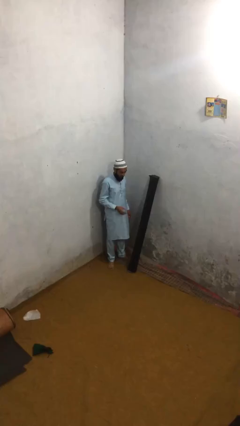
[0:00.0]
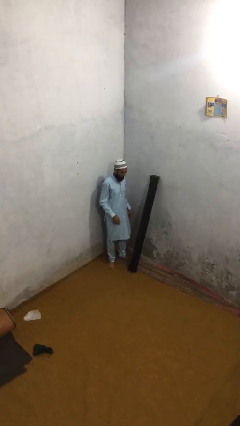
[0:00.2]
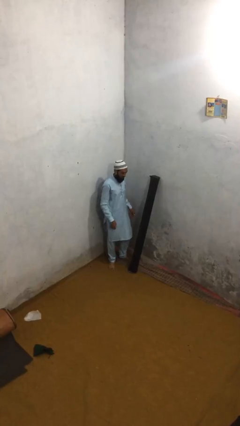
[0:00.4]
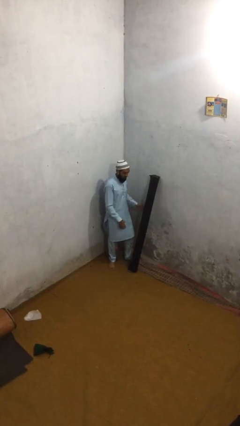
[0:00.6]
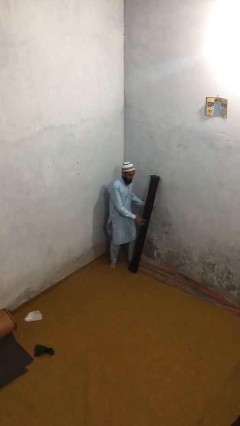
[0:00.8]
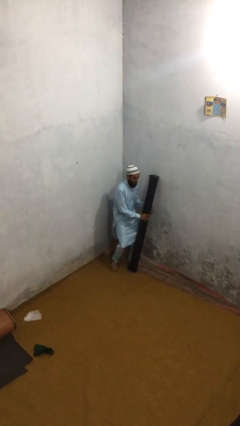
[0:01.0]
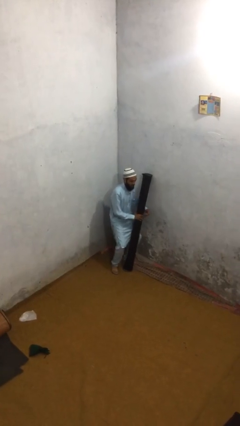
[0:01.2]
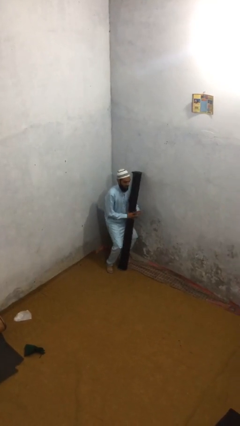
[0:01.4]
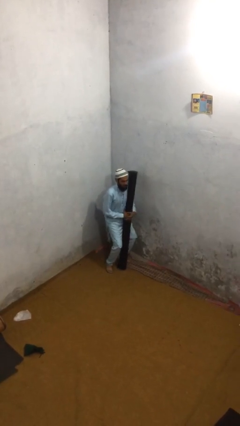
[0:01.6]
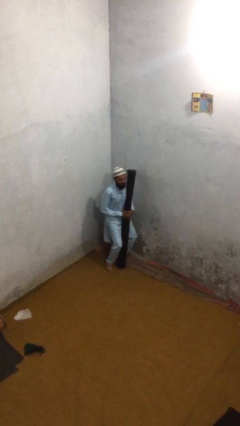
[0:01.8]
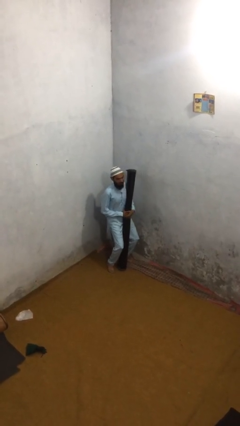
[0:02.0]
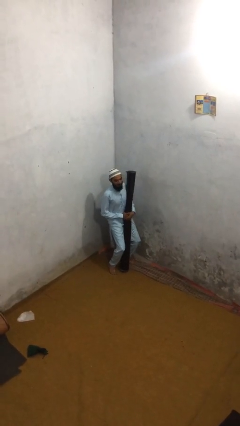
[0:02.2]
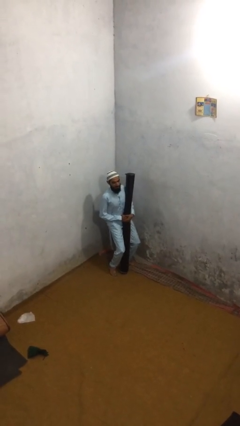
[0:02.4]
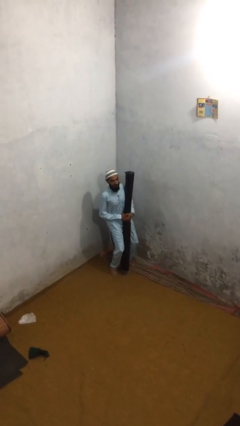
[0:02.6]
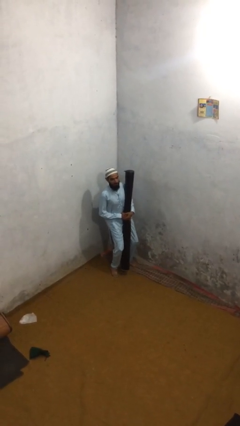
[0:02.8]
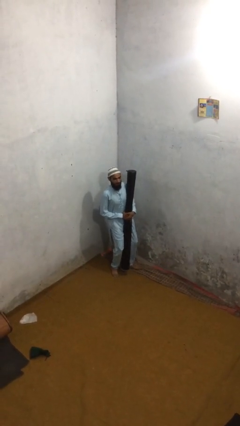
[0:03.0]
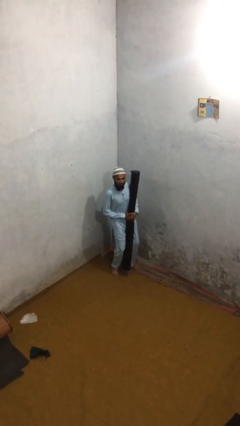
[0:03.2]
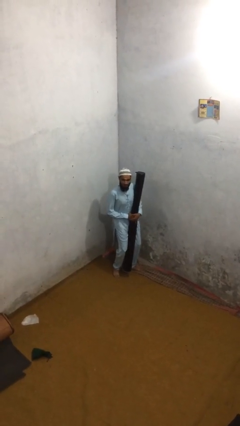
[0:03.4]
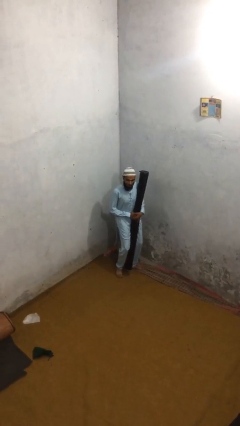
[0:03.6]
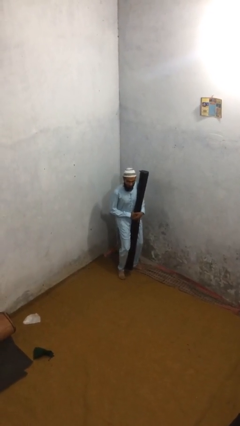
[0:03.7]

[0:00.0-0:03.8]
person picks up object from floor

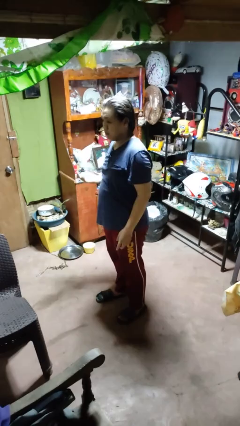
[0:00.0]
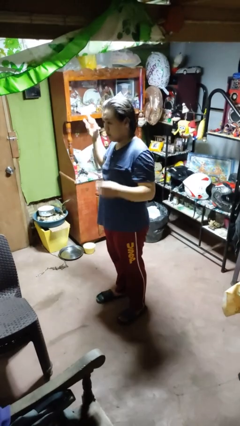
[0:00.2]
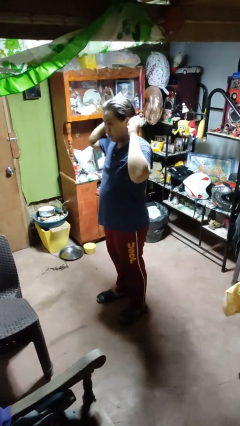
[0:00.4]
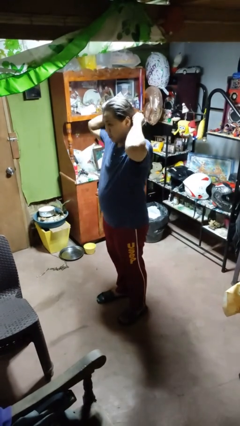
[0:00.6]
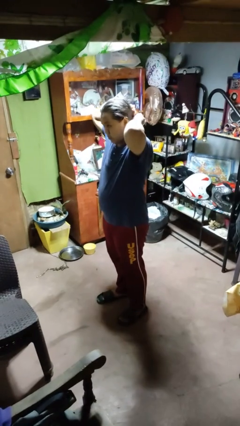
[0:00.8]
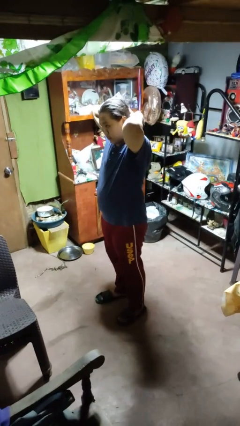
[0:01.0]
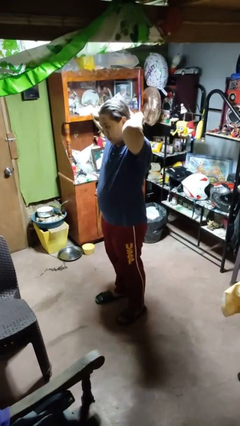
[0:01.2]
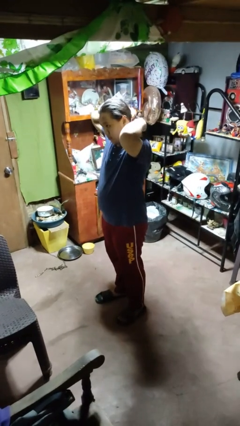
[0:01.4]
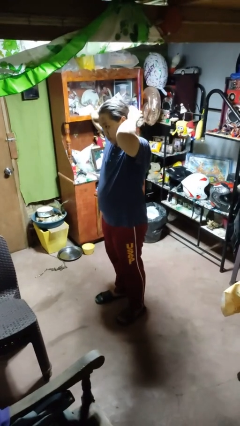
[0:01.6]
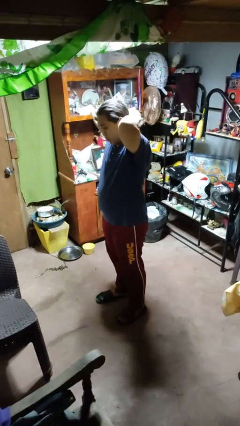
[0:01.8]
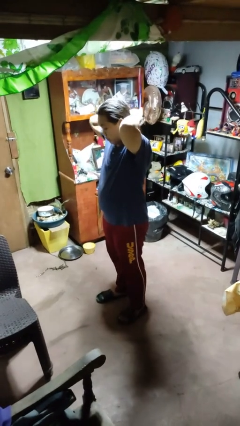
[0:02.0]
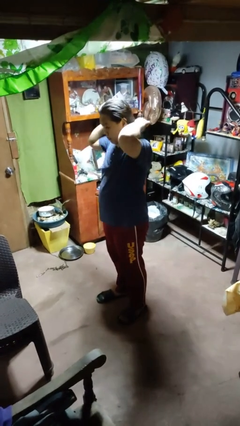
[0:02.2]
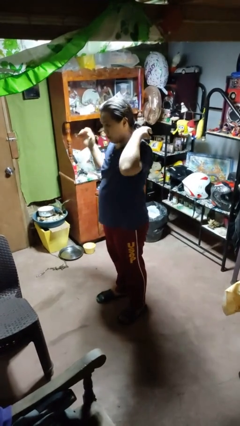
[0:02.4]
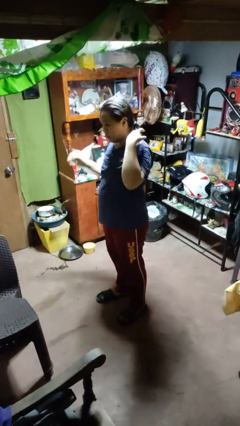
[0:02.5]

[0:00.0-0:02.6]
person puts hair in ponytail

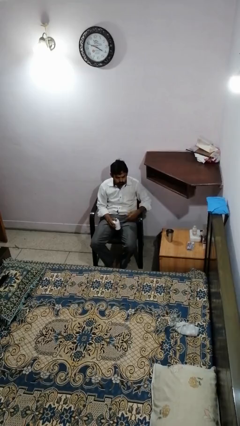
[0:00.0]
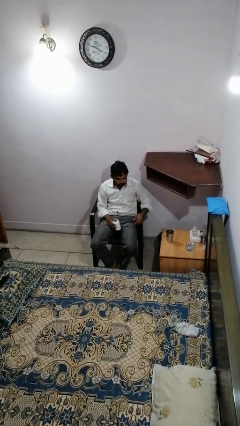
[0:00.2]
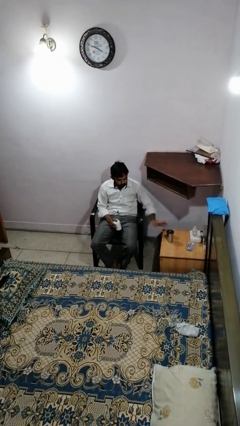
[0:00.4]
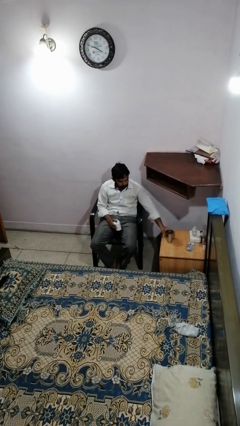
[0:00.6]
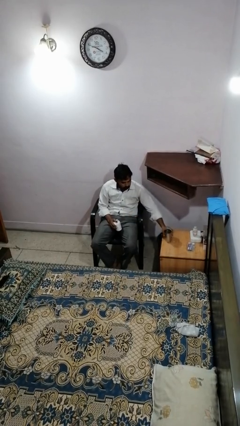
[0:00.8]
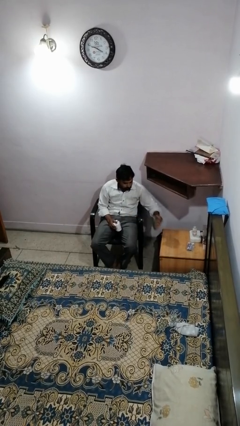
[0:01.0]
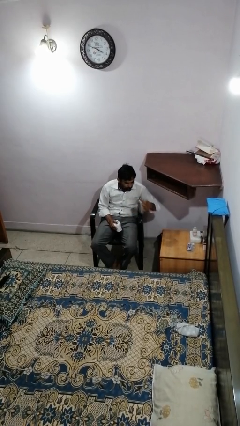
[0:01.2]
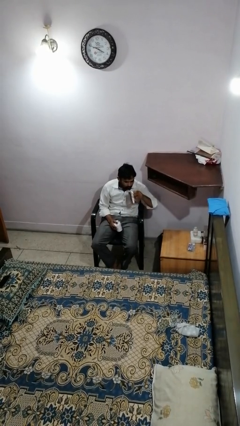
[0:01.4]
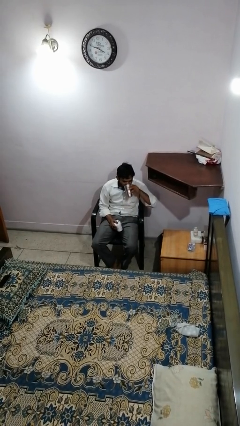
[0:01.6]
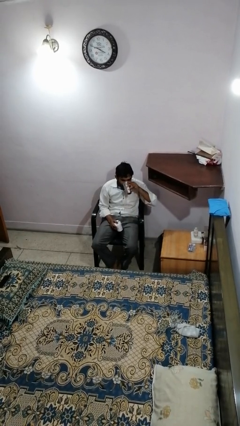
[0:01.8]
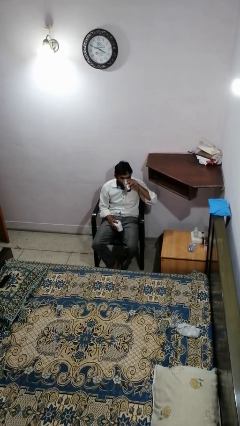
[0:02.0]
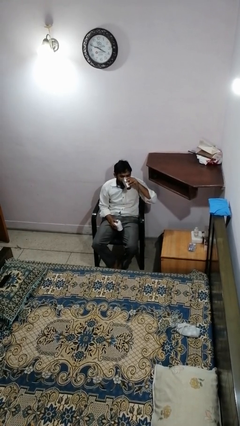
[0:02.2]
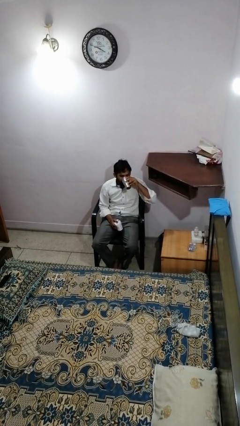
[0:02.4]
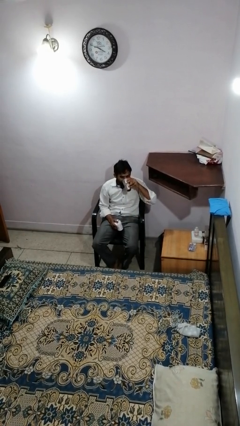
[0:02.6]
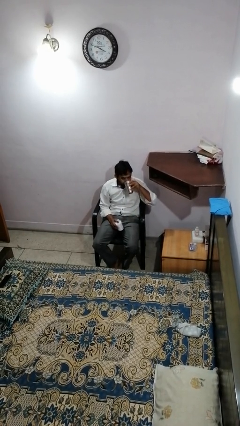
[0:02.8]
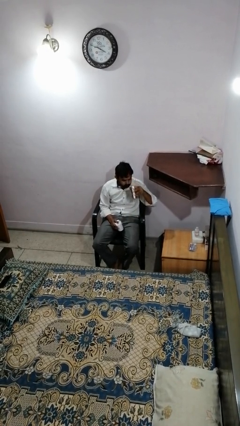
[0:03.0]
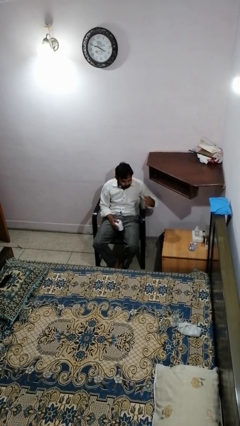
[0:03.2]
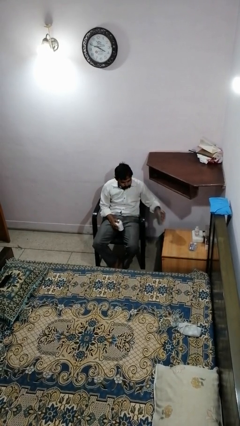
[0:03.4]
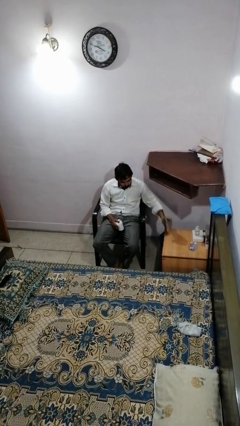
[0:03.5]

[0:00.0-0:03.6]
person drinks from cup

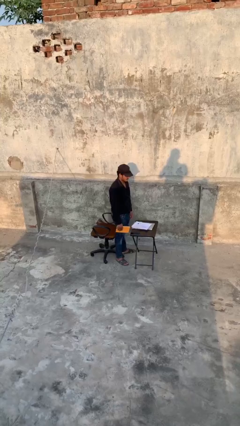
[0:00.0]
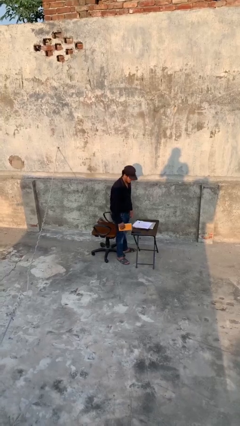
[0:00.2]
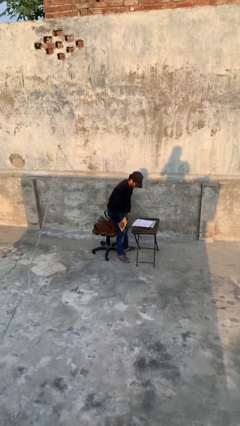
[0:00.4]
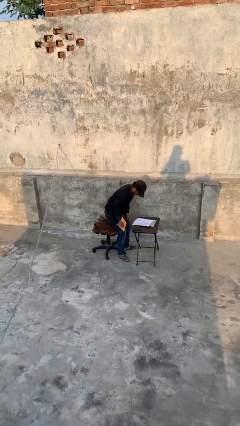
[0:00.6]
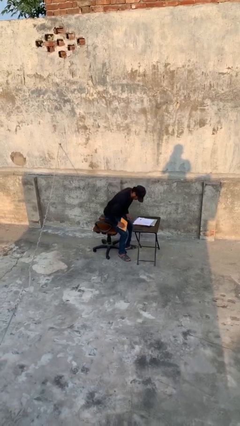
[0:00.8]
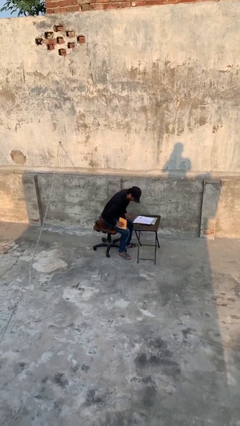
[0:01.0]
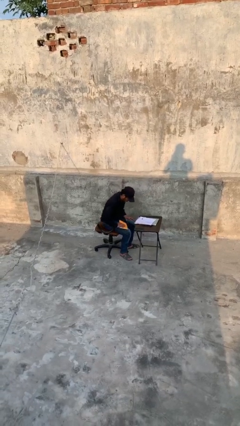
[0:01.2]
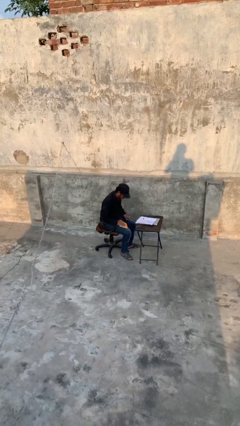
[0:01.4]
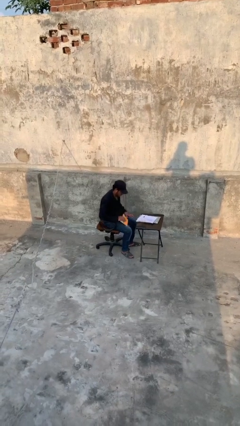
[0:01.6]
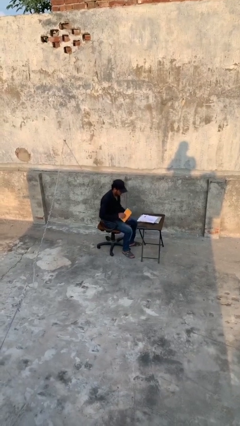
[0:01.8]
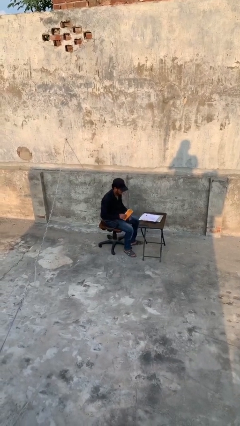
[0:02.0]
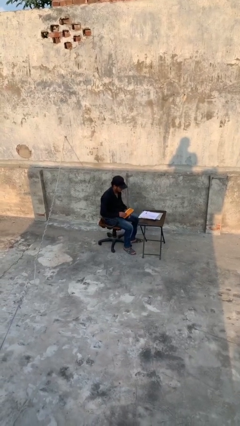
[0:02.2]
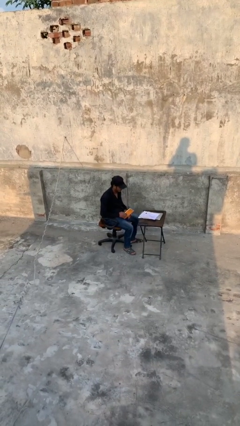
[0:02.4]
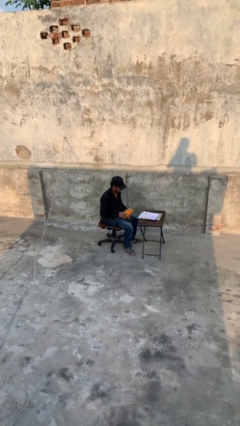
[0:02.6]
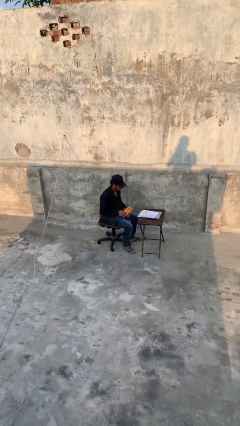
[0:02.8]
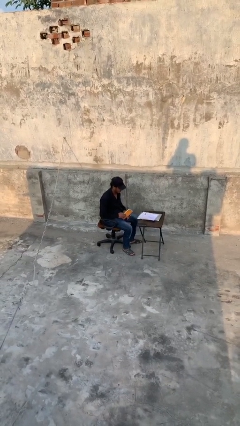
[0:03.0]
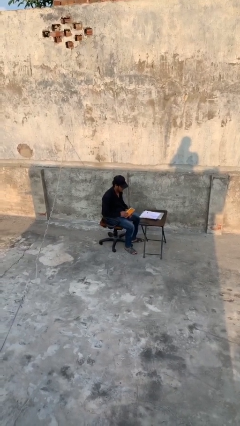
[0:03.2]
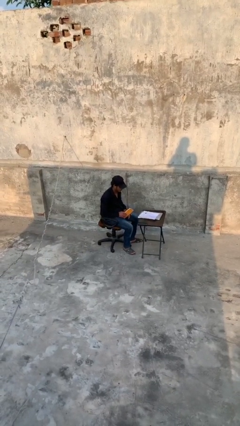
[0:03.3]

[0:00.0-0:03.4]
person sits down

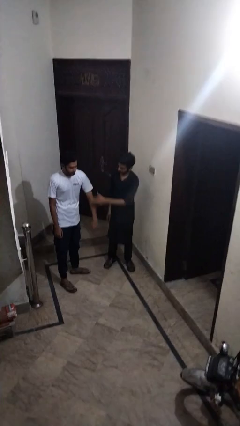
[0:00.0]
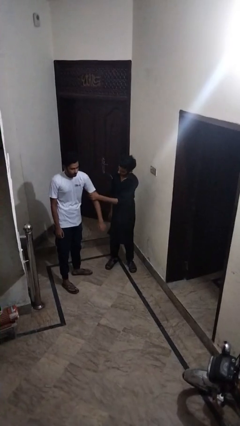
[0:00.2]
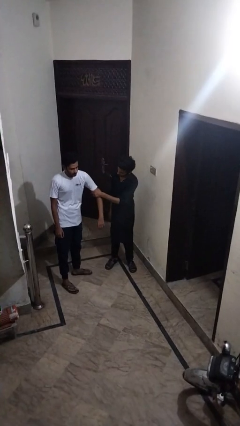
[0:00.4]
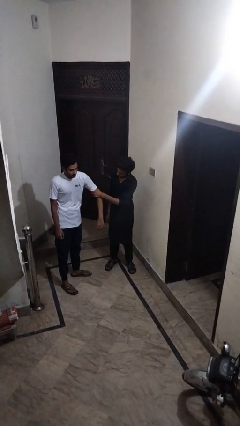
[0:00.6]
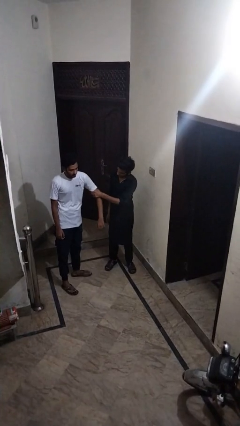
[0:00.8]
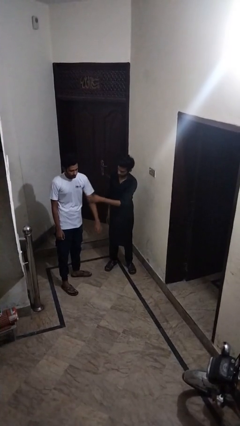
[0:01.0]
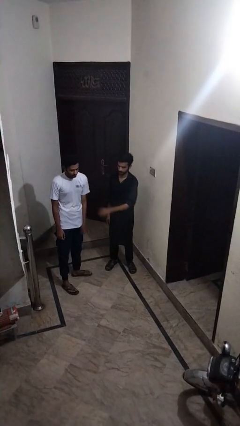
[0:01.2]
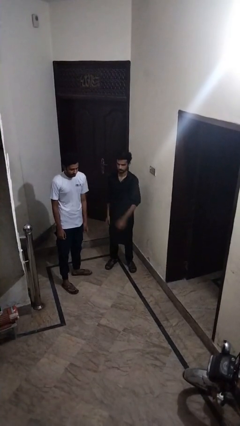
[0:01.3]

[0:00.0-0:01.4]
person grabs person by bicep

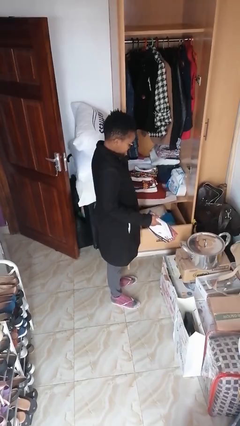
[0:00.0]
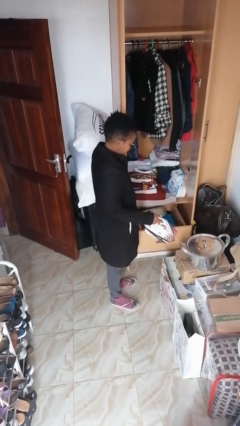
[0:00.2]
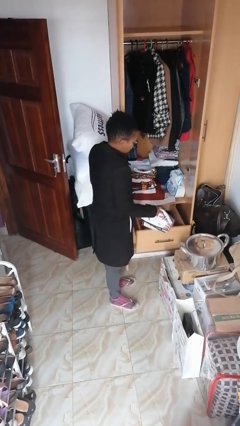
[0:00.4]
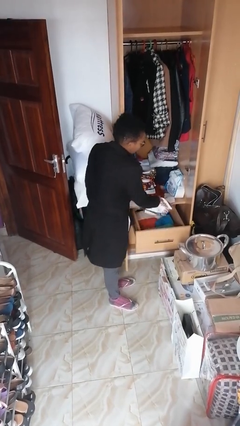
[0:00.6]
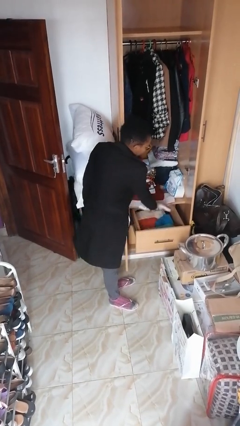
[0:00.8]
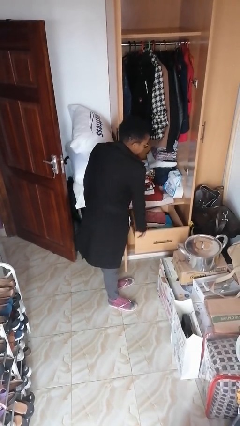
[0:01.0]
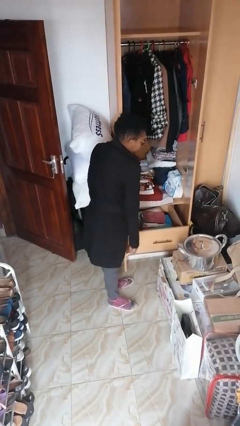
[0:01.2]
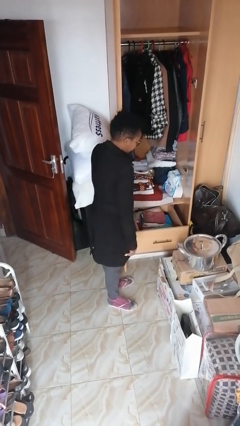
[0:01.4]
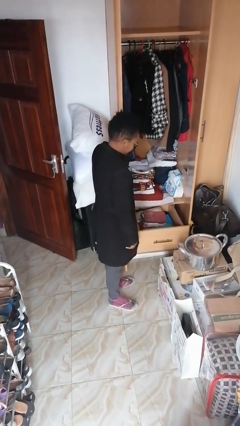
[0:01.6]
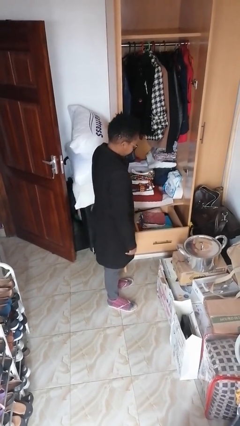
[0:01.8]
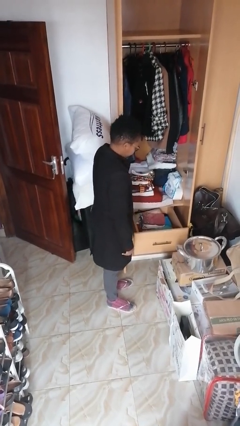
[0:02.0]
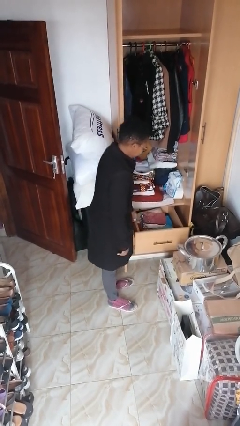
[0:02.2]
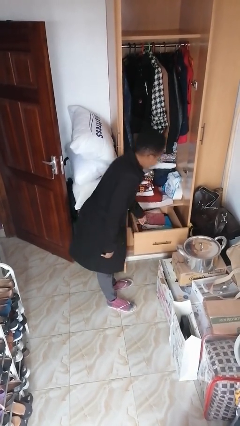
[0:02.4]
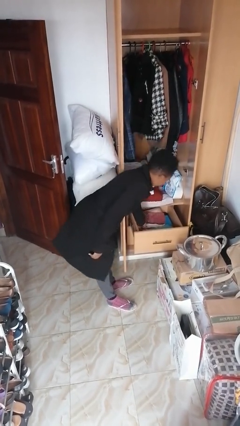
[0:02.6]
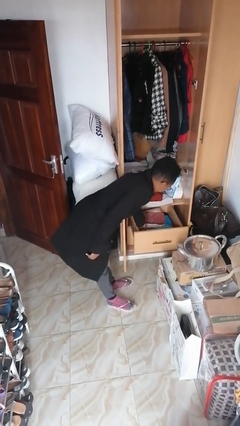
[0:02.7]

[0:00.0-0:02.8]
person pets cat
